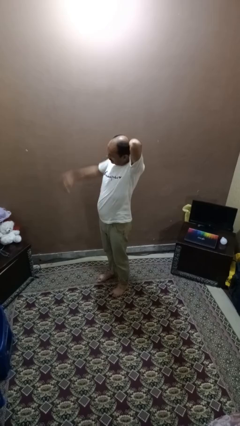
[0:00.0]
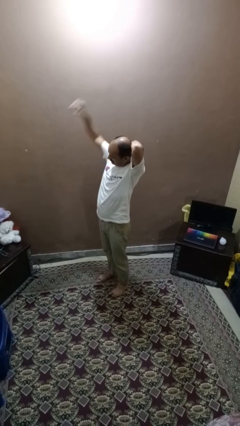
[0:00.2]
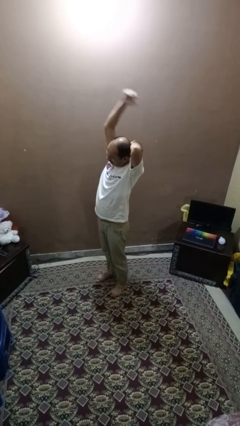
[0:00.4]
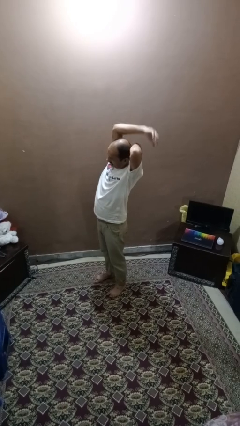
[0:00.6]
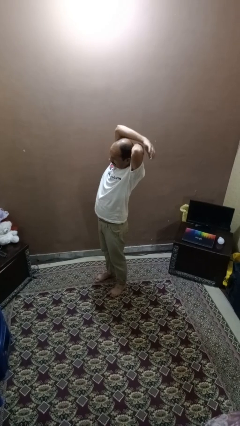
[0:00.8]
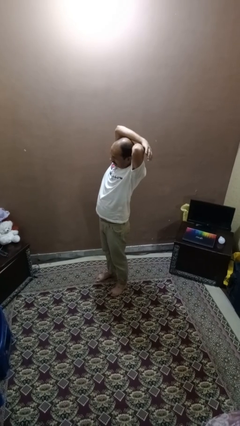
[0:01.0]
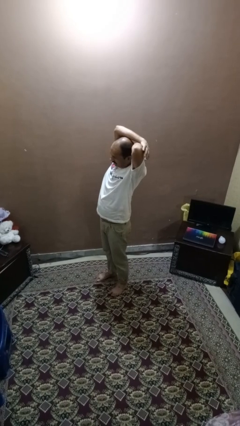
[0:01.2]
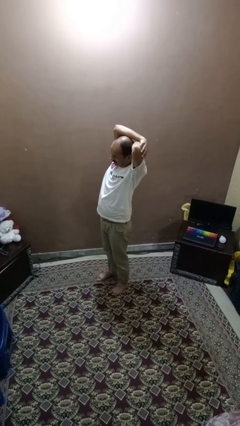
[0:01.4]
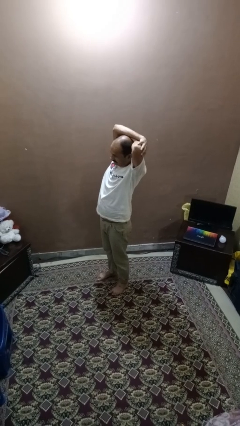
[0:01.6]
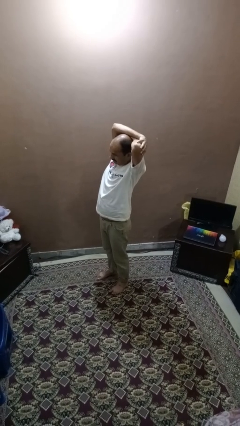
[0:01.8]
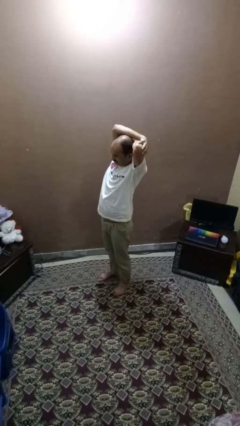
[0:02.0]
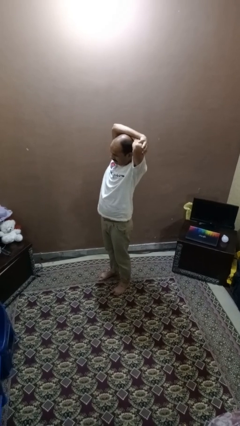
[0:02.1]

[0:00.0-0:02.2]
person stretches arms over head

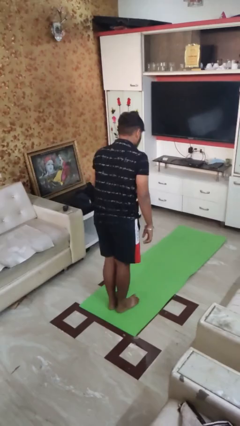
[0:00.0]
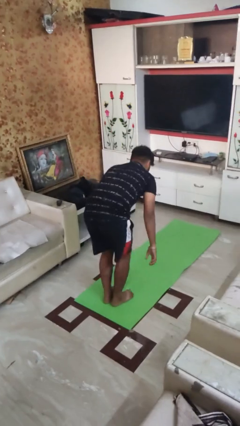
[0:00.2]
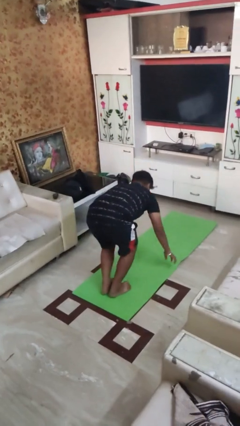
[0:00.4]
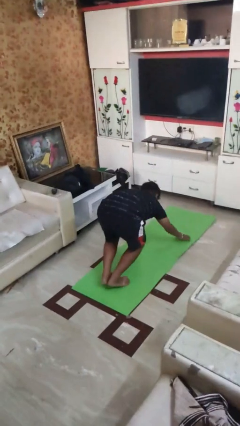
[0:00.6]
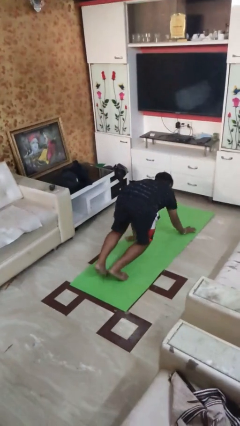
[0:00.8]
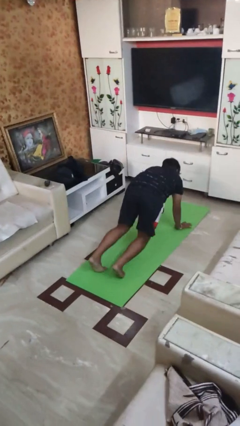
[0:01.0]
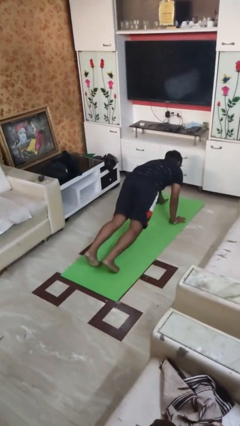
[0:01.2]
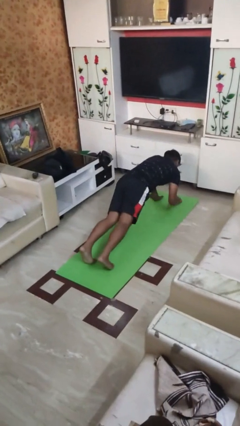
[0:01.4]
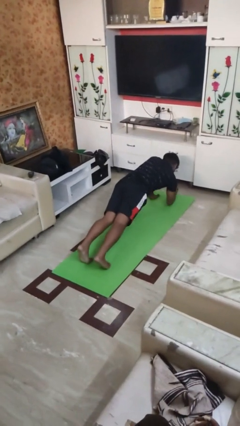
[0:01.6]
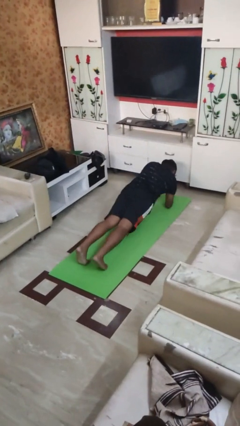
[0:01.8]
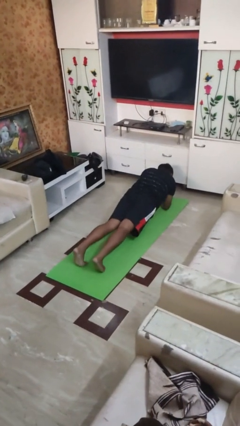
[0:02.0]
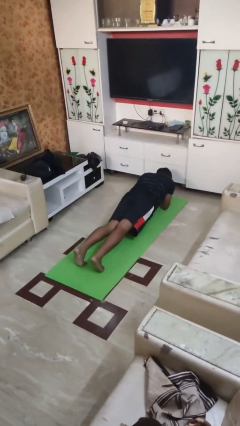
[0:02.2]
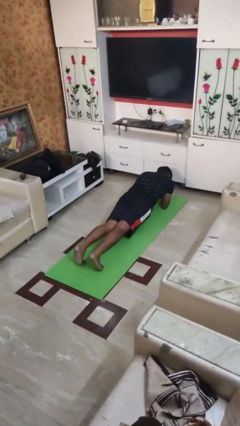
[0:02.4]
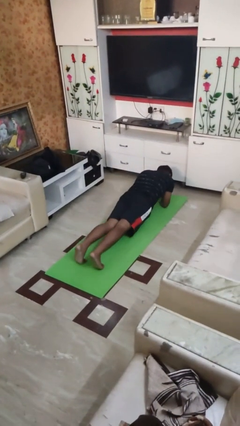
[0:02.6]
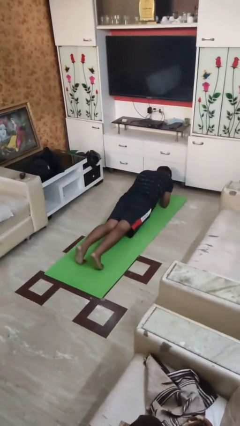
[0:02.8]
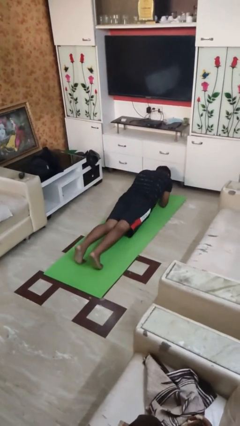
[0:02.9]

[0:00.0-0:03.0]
person exercises with plank

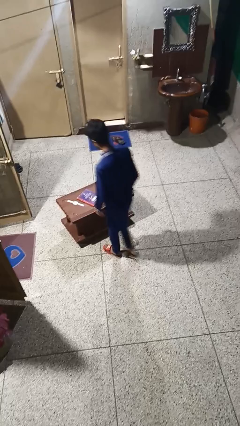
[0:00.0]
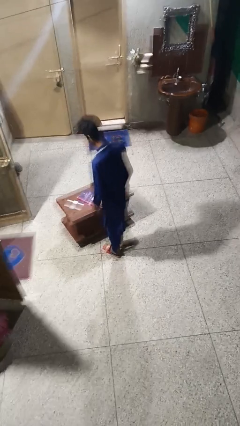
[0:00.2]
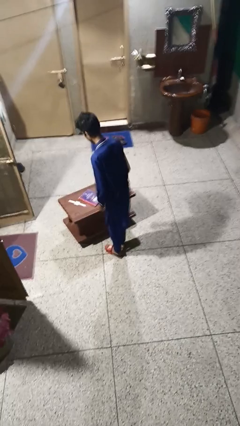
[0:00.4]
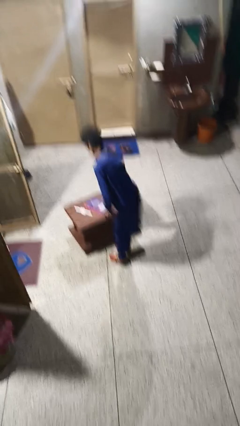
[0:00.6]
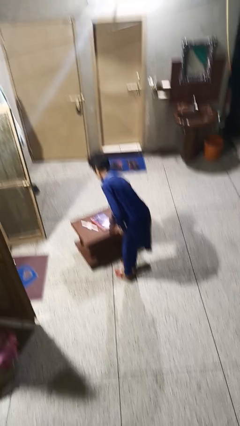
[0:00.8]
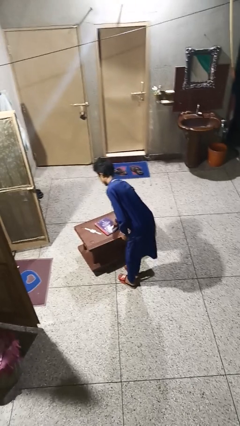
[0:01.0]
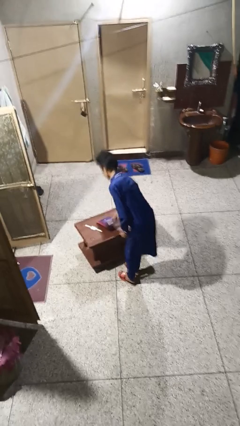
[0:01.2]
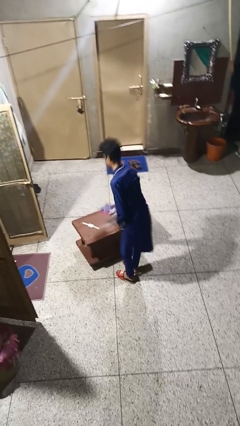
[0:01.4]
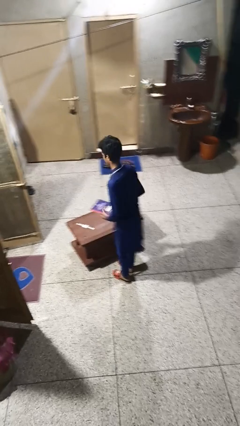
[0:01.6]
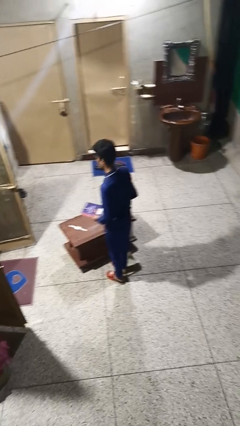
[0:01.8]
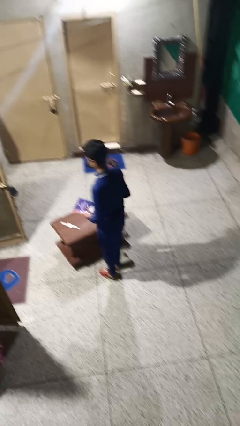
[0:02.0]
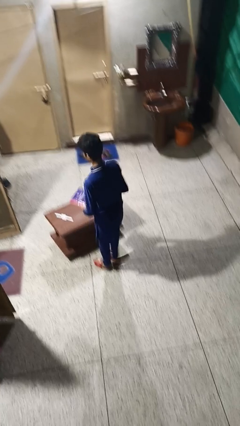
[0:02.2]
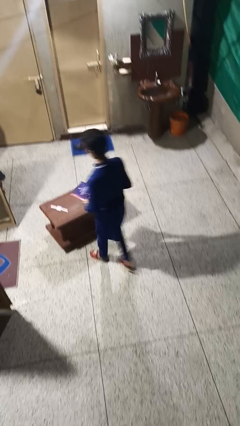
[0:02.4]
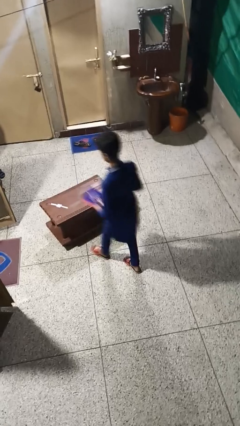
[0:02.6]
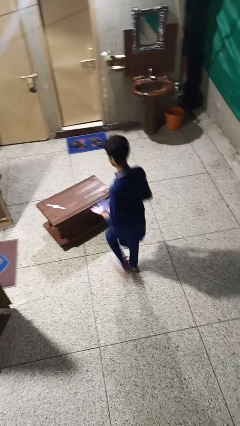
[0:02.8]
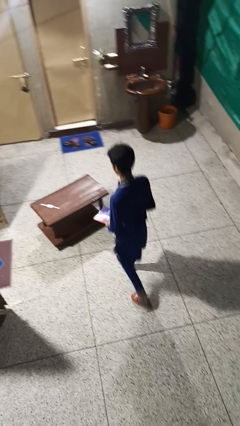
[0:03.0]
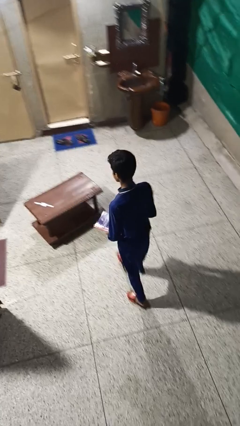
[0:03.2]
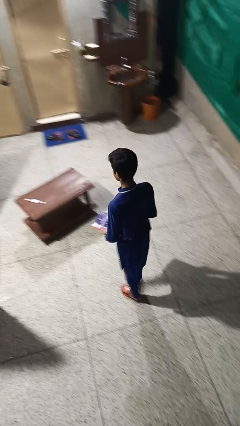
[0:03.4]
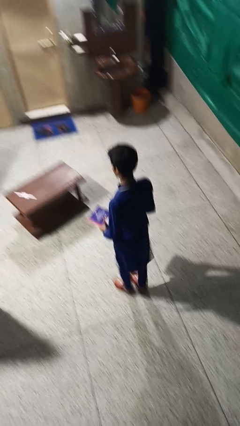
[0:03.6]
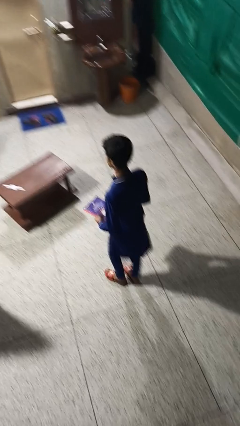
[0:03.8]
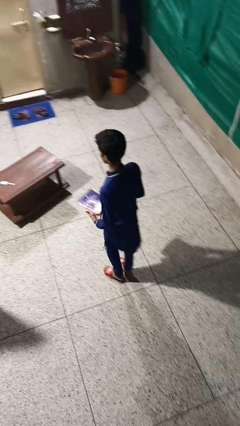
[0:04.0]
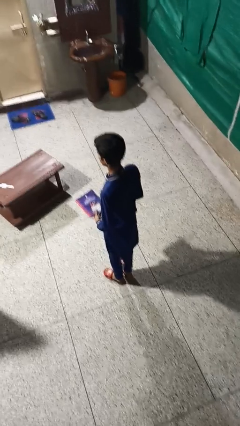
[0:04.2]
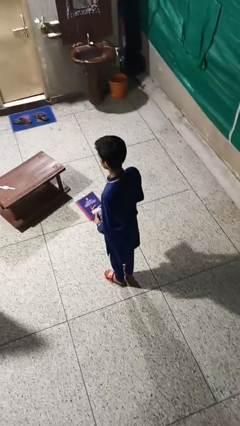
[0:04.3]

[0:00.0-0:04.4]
person picks up object from table

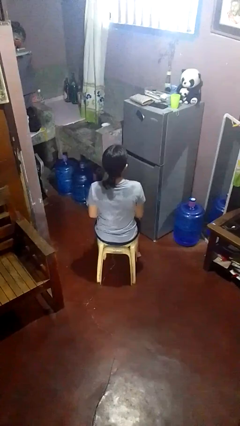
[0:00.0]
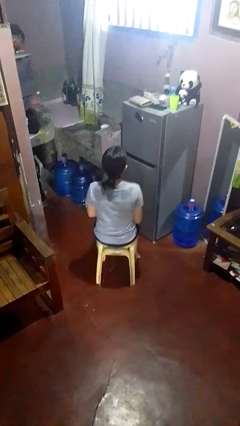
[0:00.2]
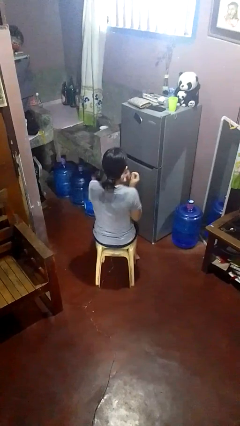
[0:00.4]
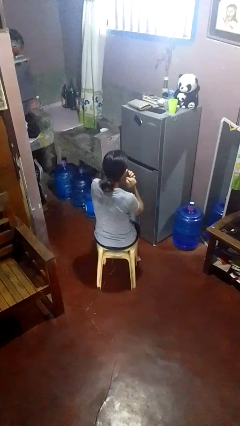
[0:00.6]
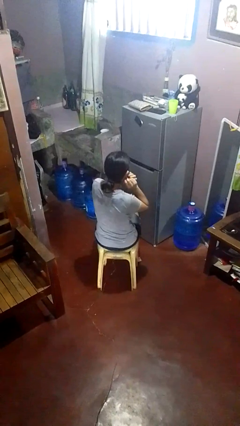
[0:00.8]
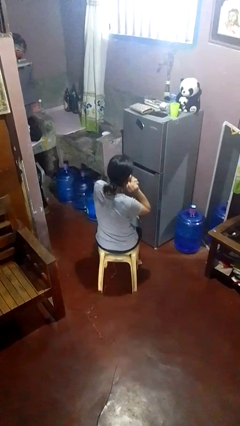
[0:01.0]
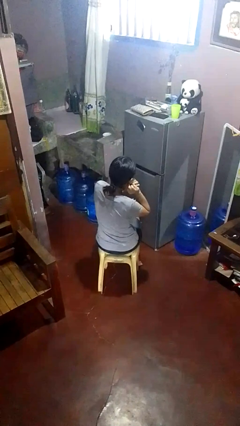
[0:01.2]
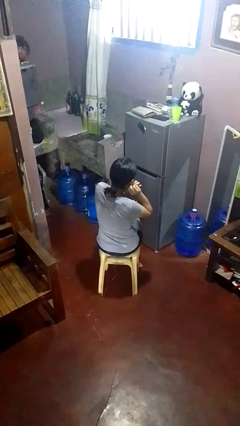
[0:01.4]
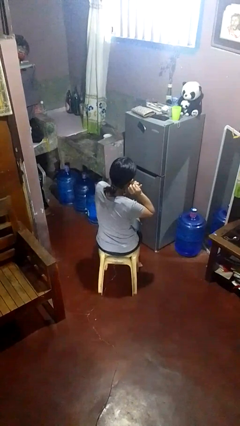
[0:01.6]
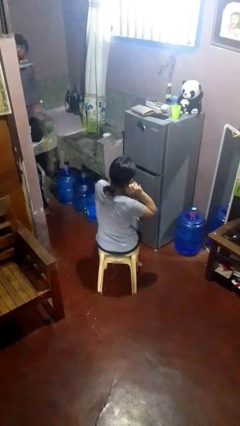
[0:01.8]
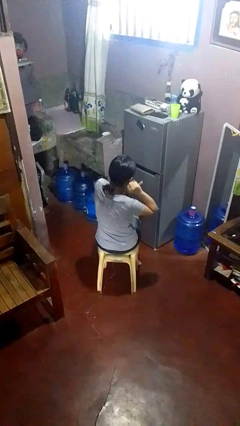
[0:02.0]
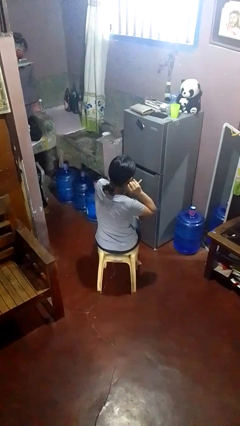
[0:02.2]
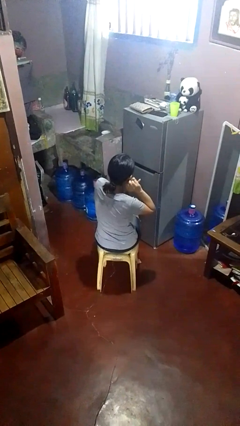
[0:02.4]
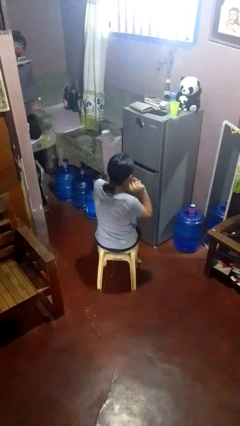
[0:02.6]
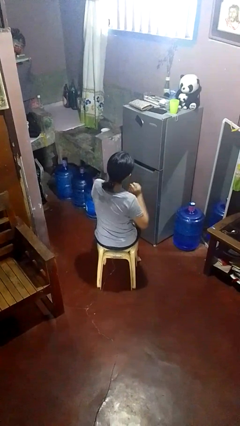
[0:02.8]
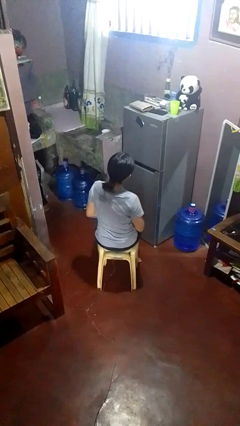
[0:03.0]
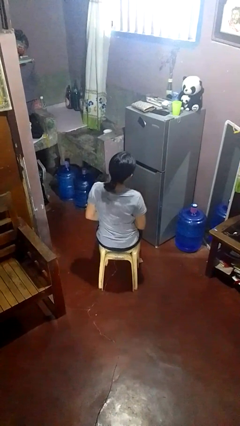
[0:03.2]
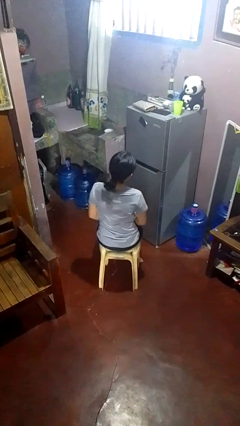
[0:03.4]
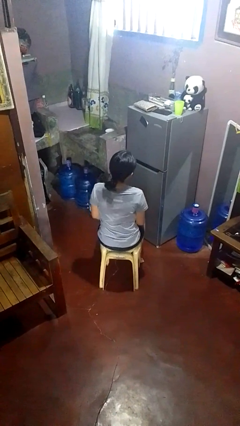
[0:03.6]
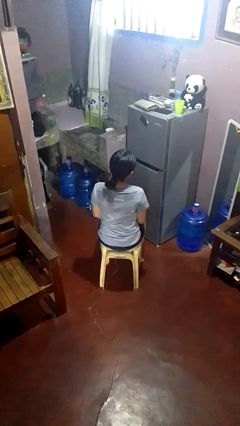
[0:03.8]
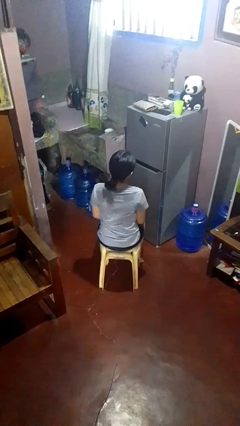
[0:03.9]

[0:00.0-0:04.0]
person puts on earrings

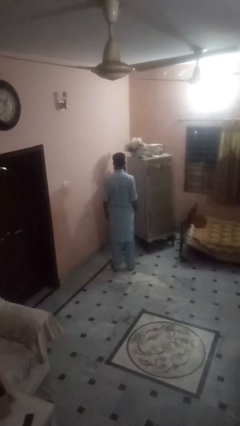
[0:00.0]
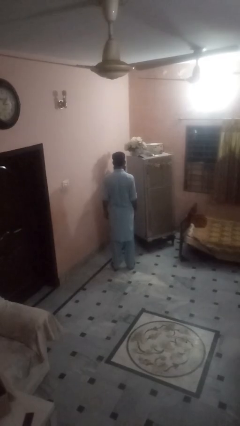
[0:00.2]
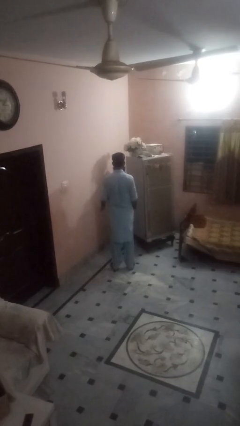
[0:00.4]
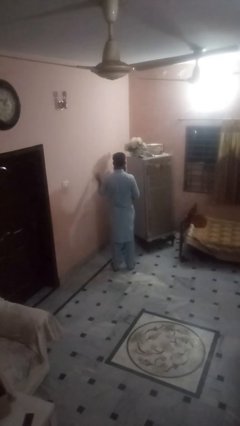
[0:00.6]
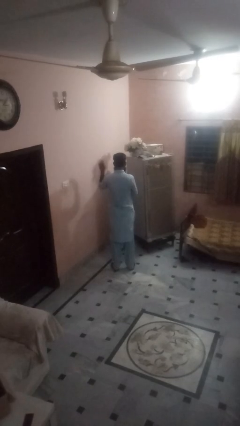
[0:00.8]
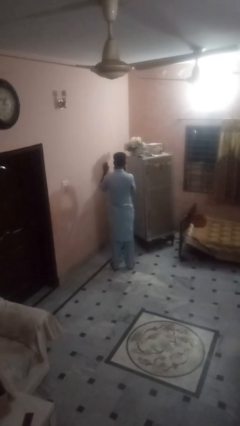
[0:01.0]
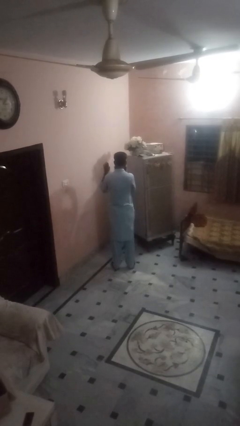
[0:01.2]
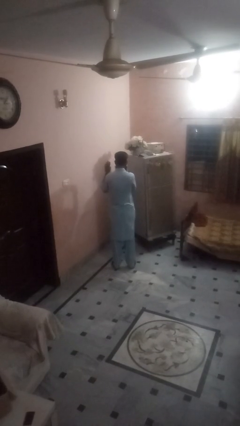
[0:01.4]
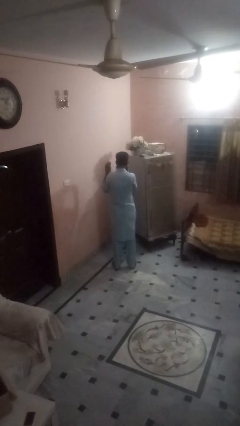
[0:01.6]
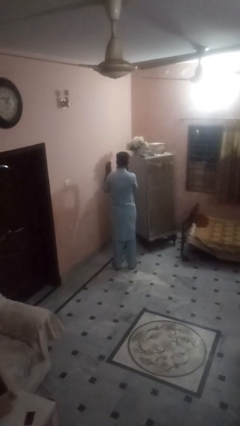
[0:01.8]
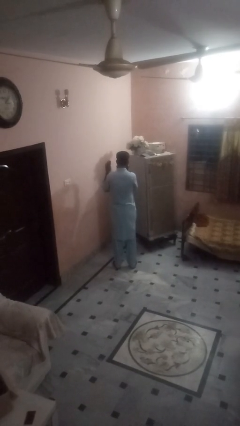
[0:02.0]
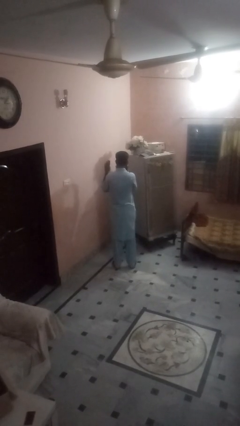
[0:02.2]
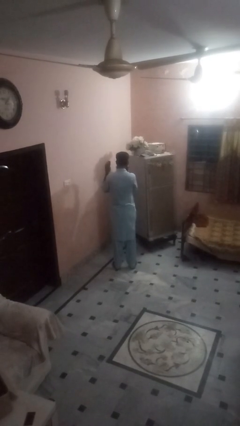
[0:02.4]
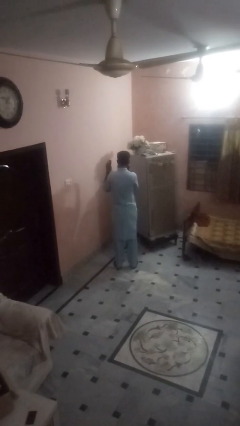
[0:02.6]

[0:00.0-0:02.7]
person gestures number four

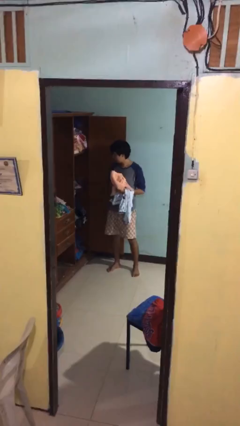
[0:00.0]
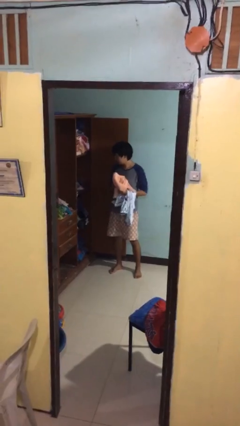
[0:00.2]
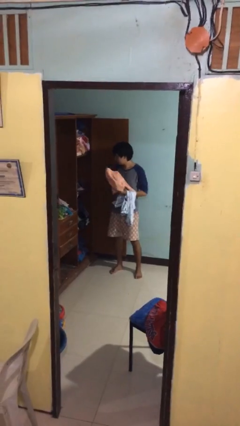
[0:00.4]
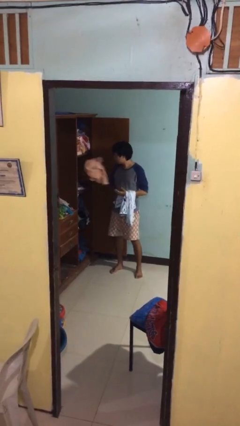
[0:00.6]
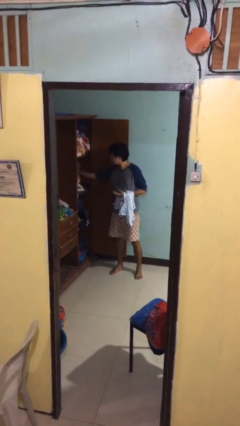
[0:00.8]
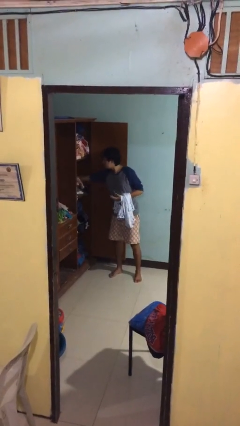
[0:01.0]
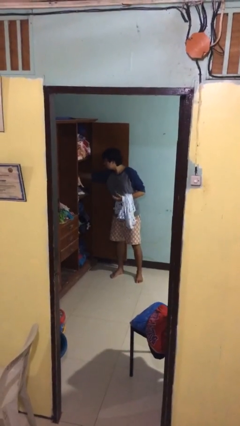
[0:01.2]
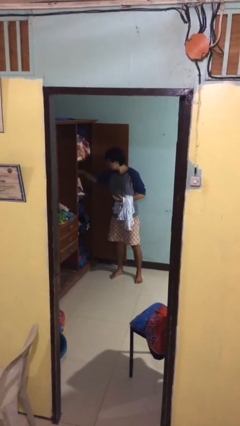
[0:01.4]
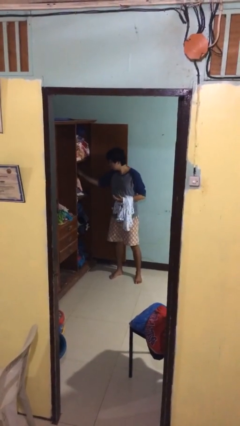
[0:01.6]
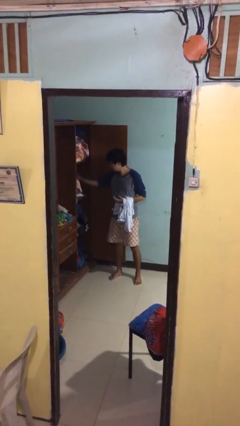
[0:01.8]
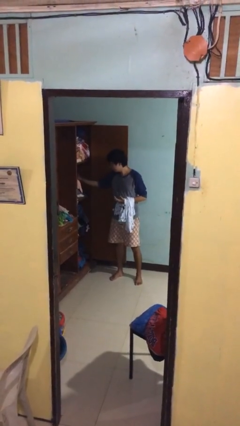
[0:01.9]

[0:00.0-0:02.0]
person puts clothes into dresser
